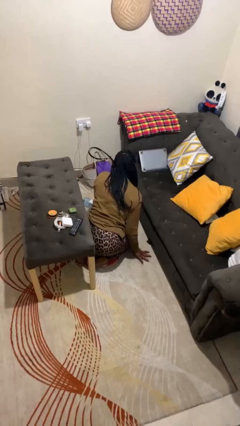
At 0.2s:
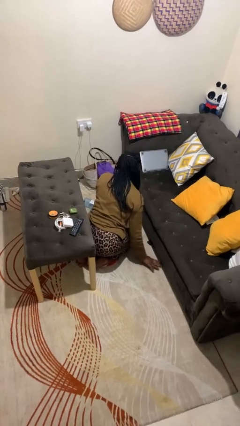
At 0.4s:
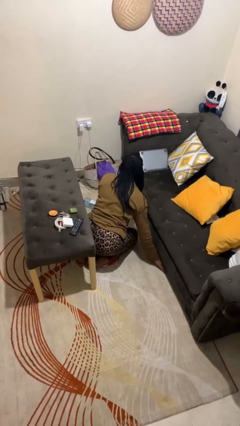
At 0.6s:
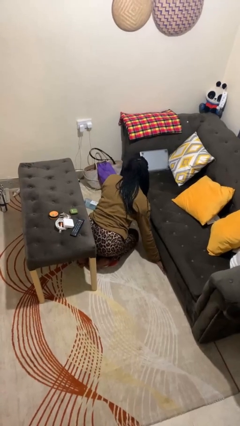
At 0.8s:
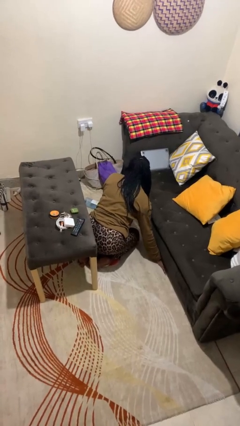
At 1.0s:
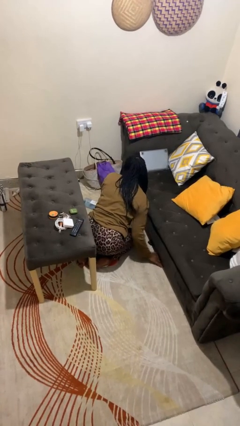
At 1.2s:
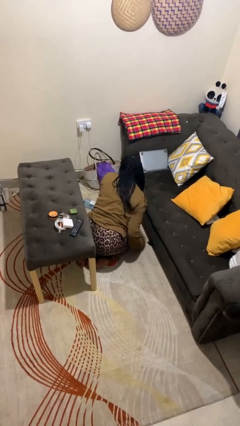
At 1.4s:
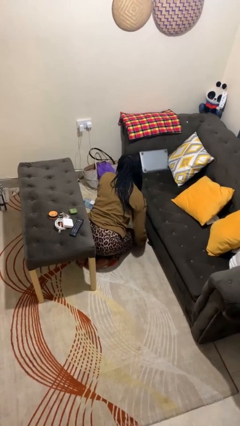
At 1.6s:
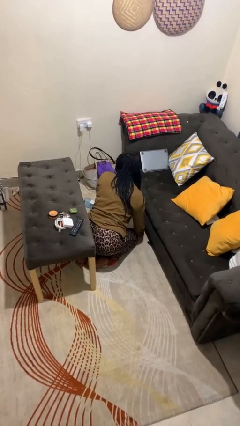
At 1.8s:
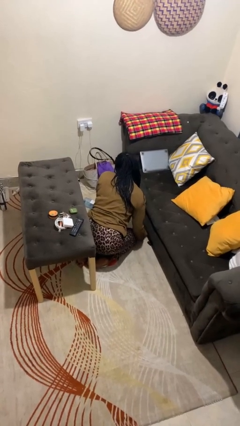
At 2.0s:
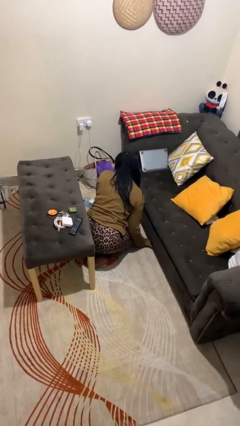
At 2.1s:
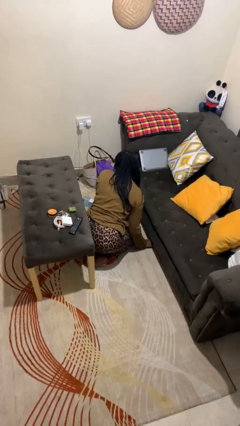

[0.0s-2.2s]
person searches under couch

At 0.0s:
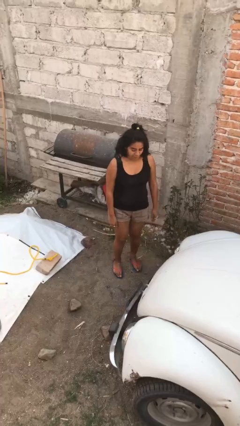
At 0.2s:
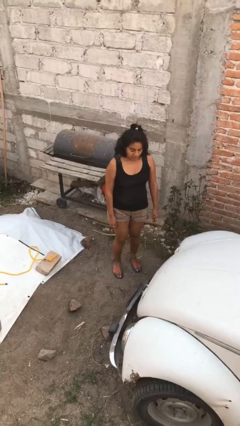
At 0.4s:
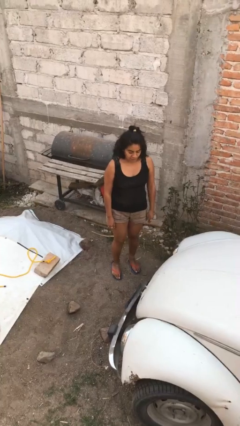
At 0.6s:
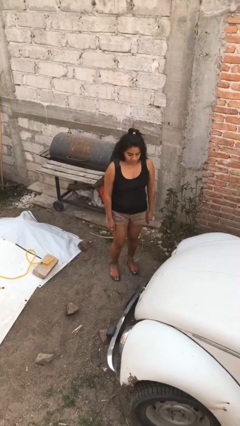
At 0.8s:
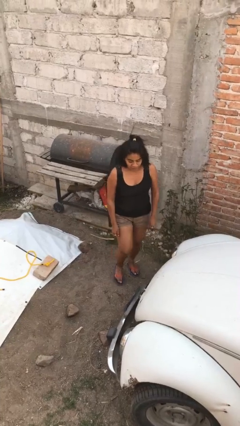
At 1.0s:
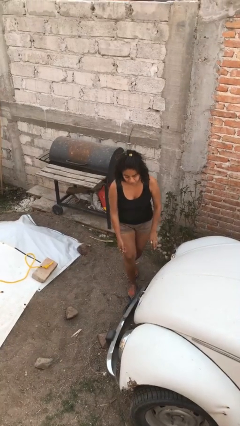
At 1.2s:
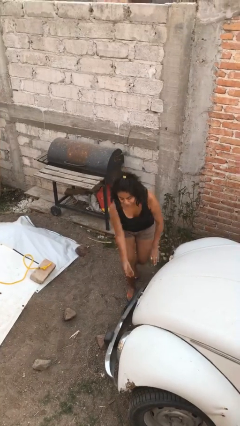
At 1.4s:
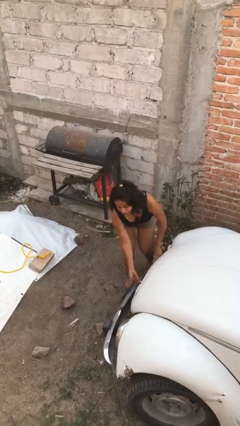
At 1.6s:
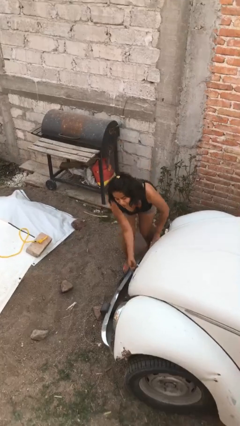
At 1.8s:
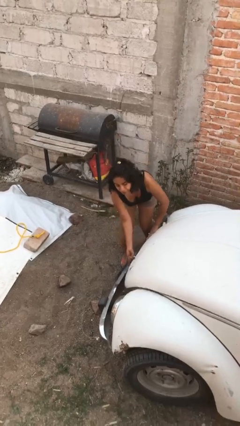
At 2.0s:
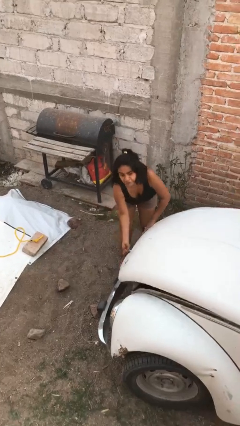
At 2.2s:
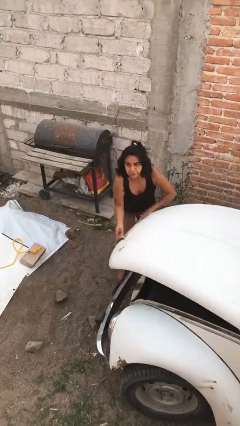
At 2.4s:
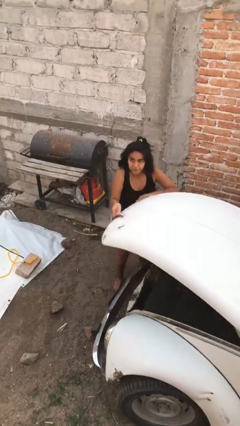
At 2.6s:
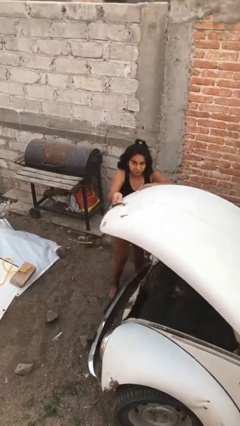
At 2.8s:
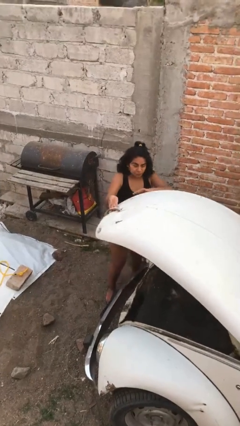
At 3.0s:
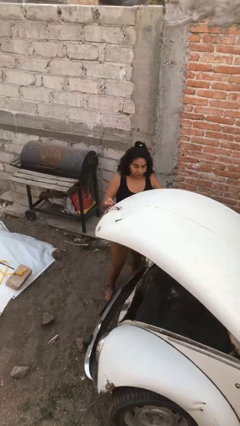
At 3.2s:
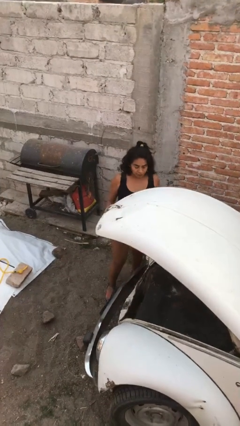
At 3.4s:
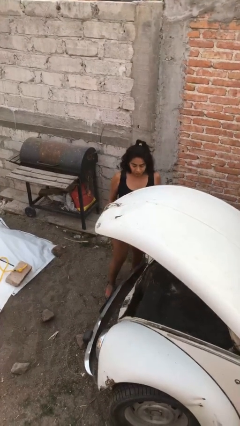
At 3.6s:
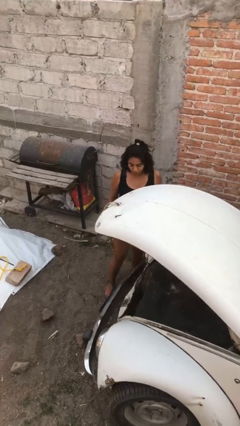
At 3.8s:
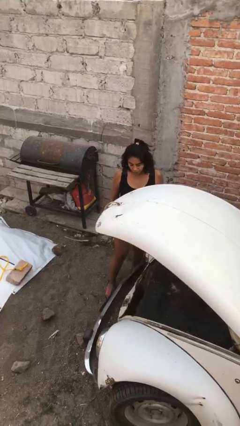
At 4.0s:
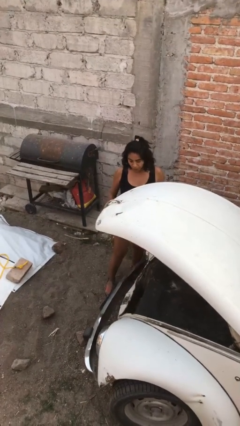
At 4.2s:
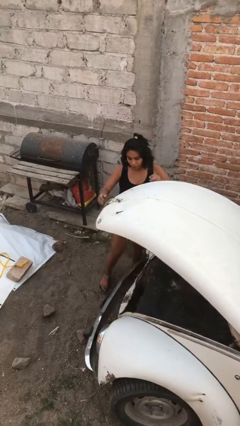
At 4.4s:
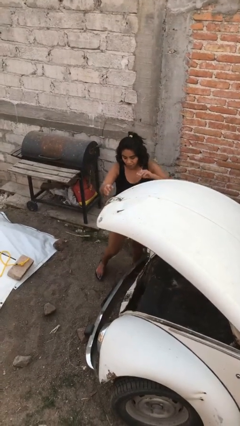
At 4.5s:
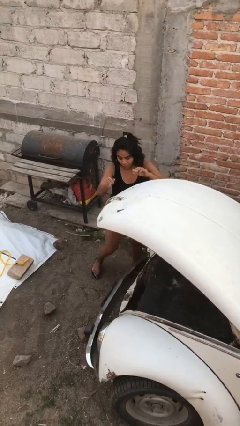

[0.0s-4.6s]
person opens car trunk

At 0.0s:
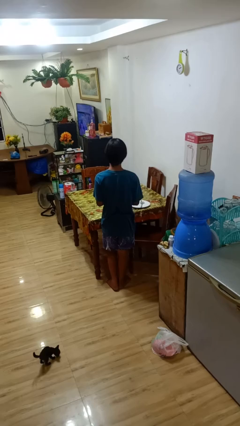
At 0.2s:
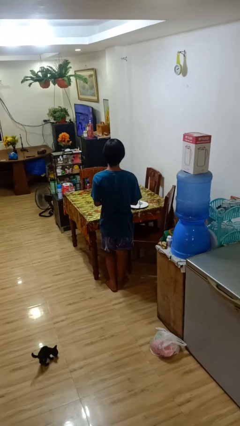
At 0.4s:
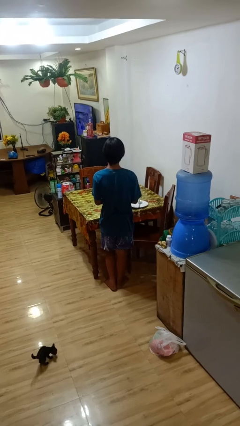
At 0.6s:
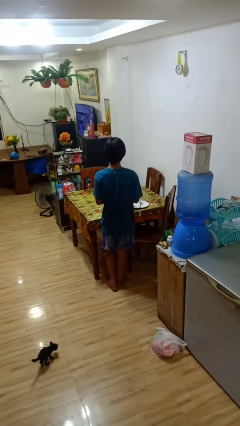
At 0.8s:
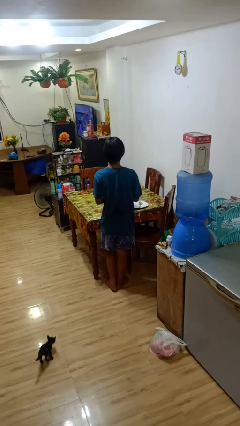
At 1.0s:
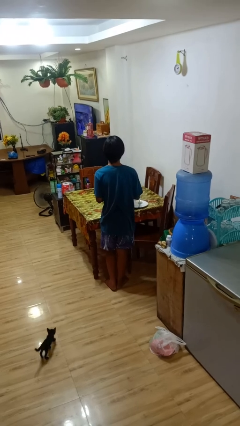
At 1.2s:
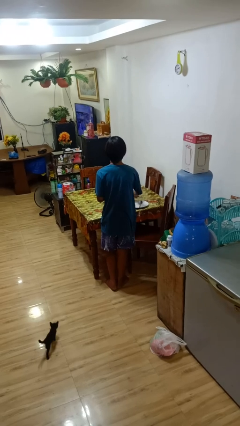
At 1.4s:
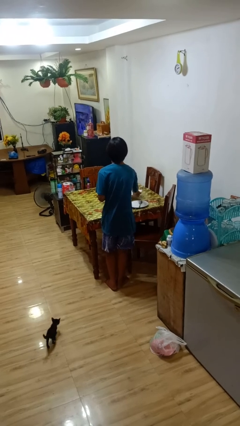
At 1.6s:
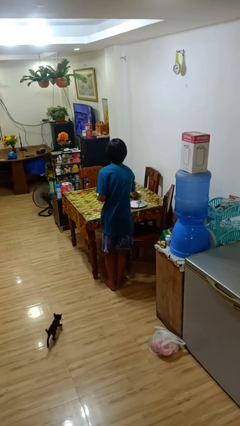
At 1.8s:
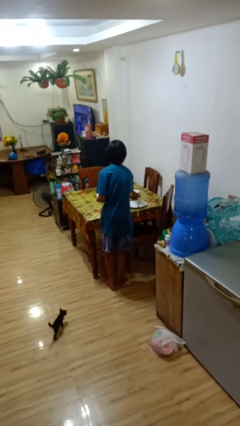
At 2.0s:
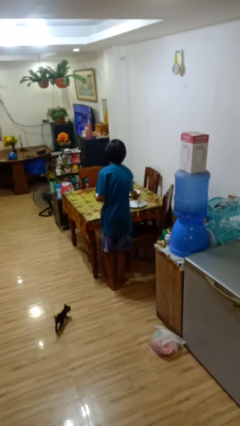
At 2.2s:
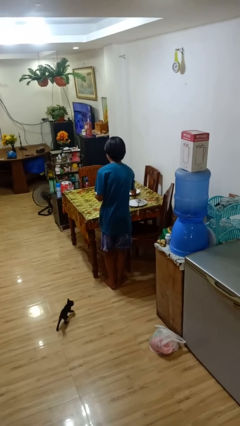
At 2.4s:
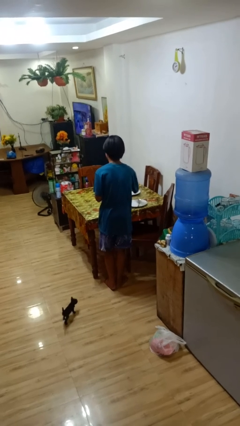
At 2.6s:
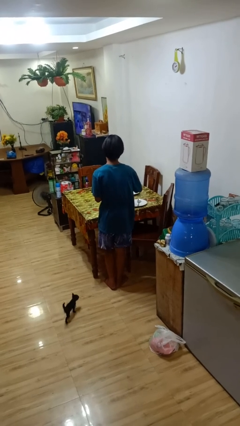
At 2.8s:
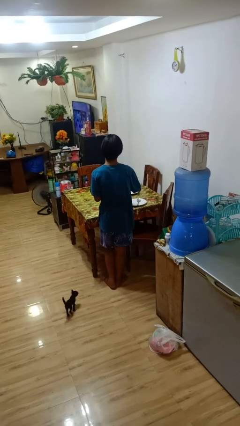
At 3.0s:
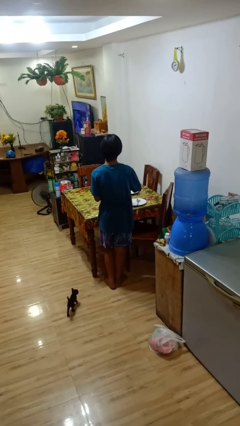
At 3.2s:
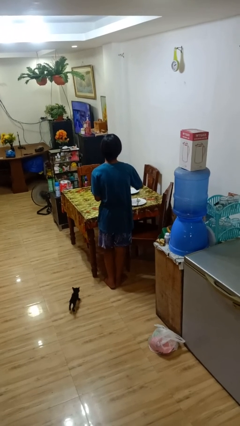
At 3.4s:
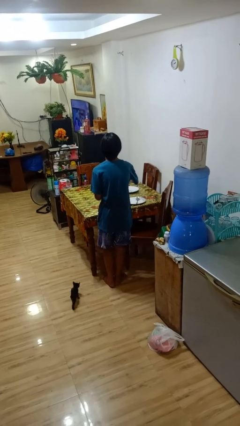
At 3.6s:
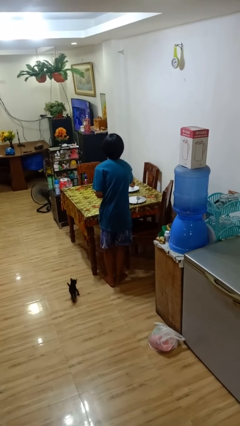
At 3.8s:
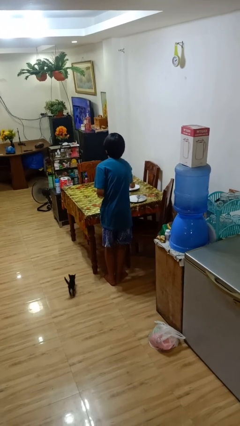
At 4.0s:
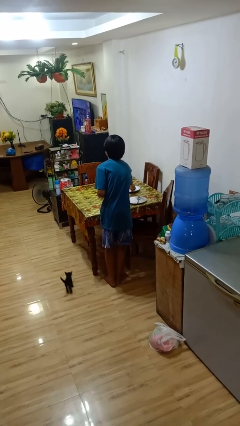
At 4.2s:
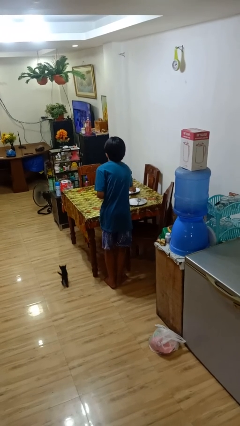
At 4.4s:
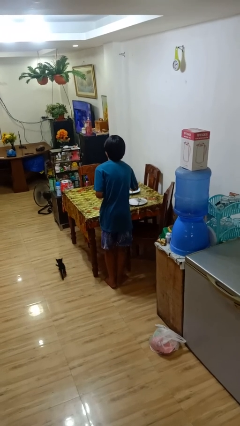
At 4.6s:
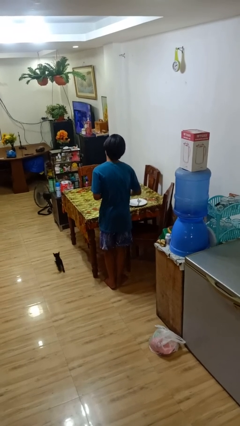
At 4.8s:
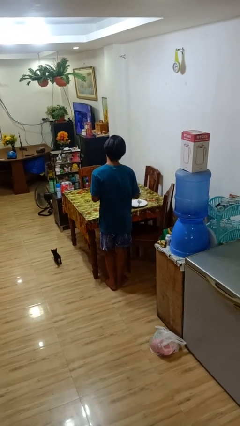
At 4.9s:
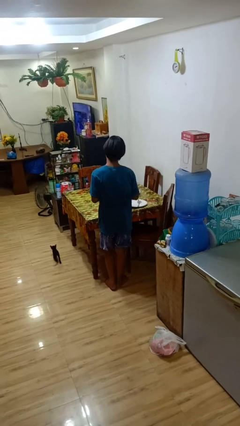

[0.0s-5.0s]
person sets table

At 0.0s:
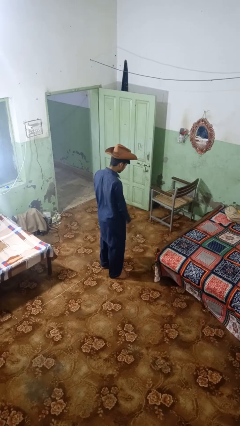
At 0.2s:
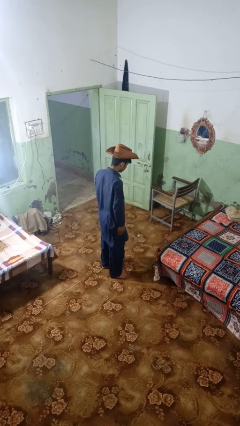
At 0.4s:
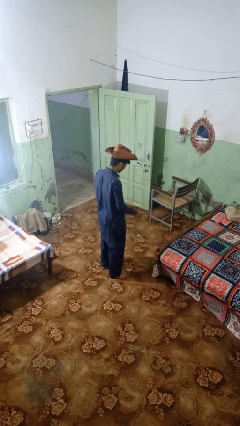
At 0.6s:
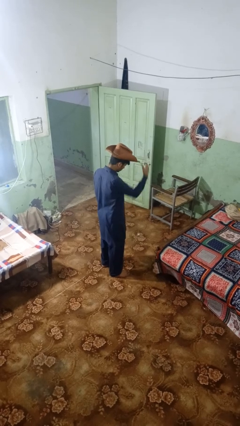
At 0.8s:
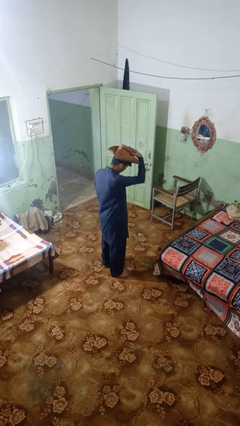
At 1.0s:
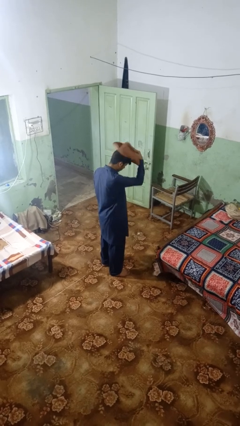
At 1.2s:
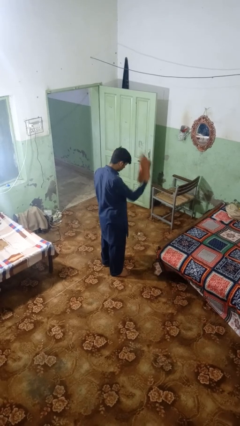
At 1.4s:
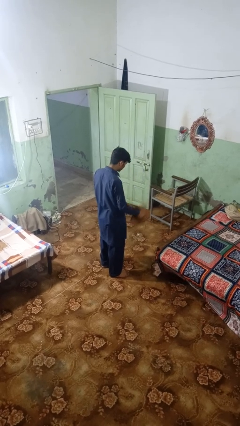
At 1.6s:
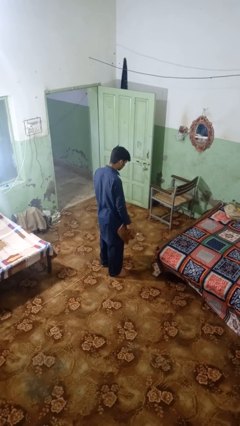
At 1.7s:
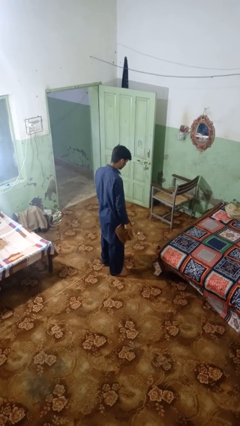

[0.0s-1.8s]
person takes off hat

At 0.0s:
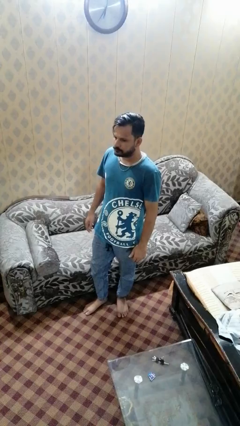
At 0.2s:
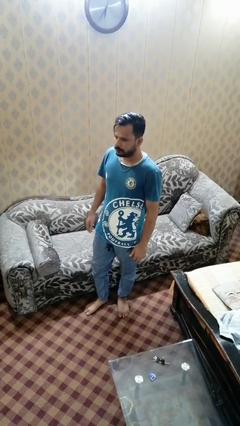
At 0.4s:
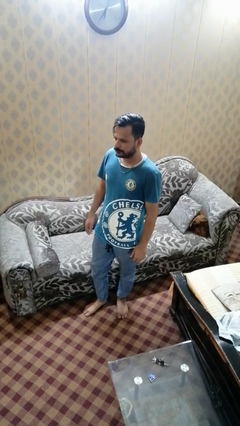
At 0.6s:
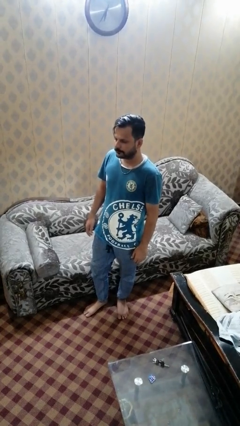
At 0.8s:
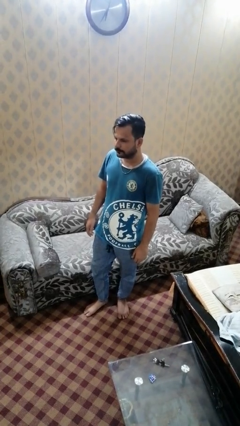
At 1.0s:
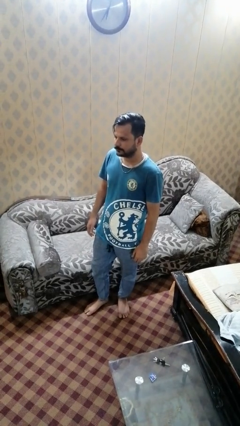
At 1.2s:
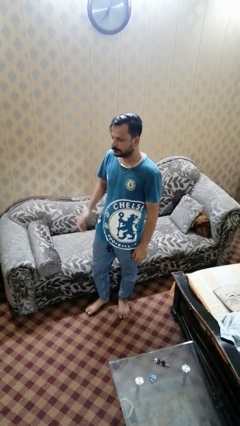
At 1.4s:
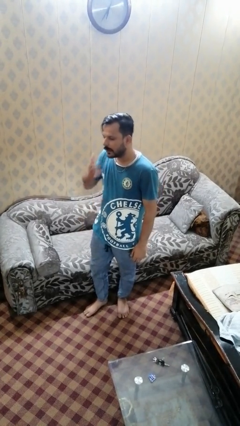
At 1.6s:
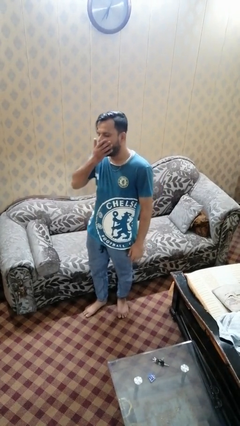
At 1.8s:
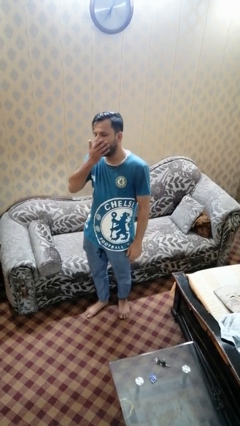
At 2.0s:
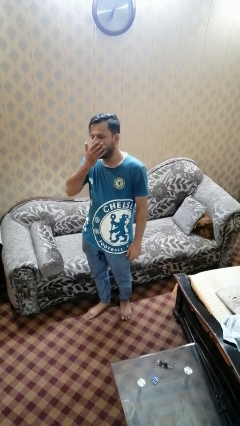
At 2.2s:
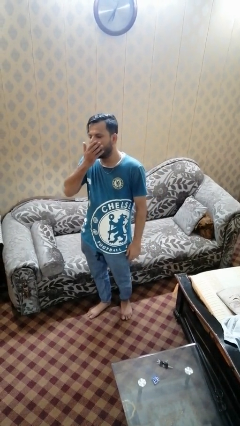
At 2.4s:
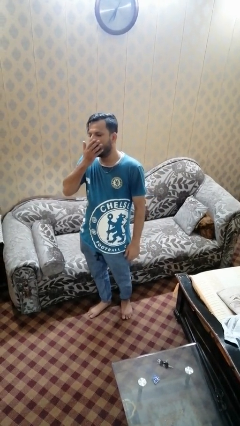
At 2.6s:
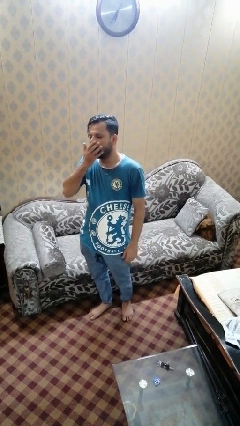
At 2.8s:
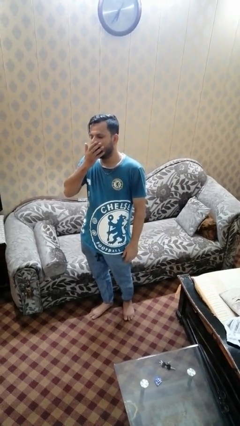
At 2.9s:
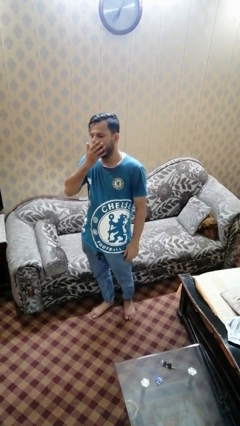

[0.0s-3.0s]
person yawns

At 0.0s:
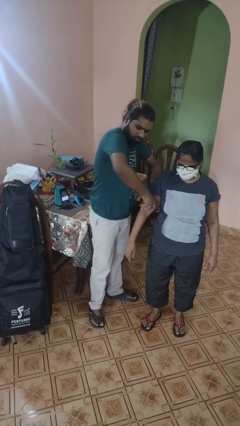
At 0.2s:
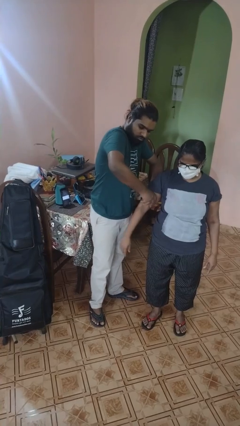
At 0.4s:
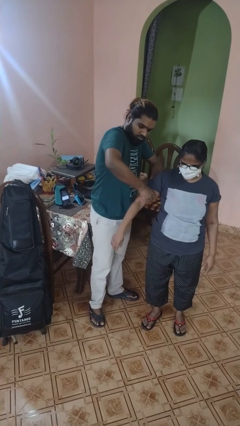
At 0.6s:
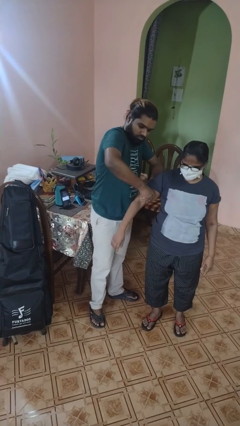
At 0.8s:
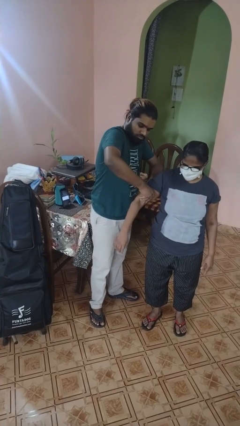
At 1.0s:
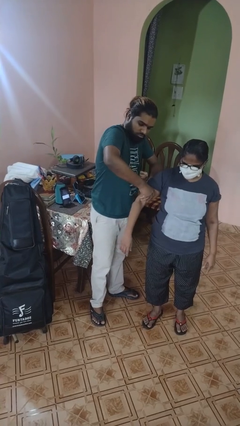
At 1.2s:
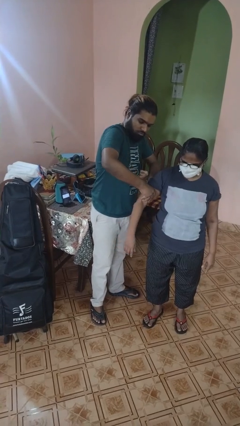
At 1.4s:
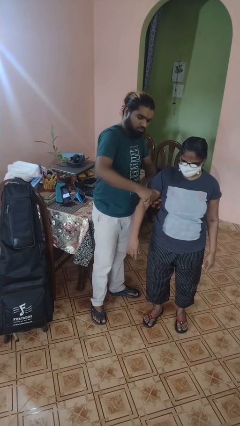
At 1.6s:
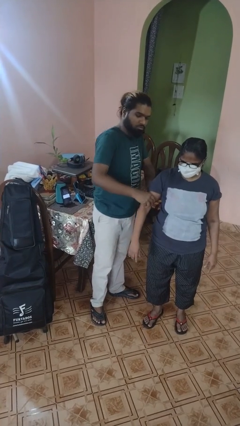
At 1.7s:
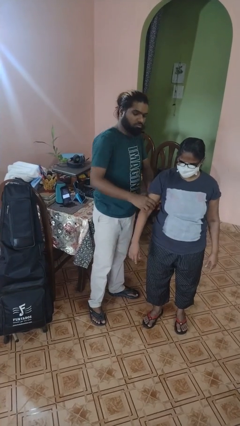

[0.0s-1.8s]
person grabs person by bicep
